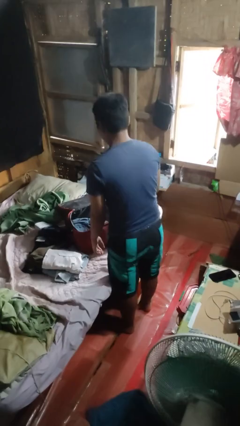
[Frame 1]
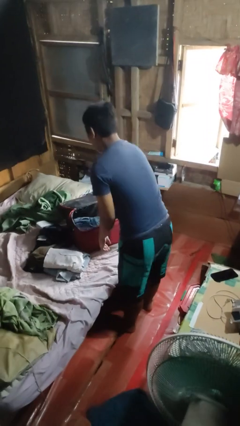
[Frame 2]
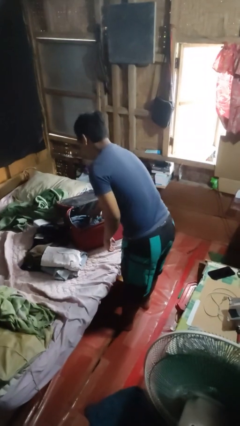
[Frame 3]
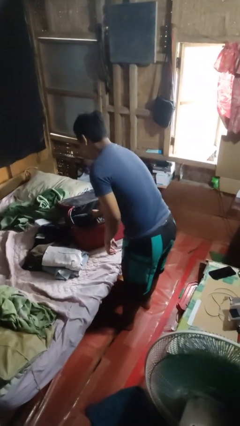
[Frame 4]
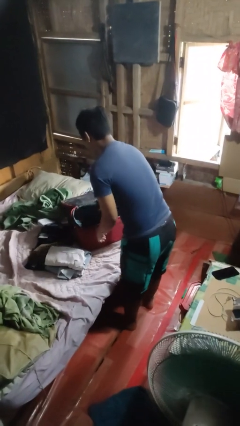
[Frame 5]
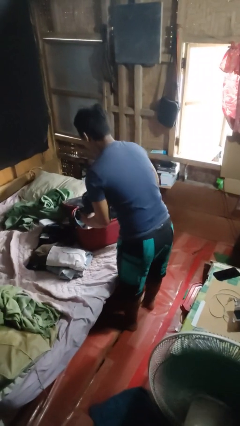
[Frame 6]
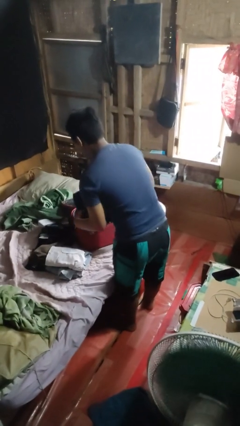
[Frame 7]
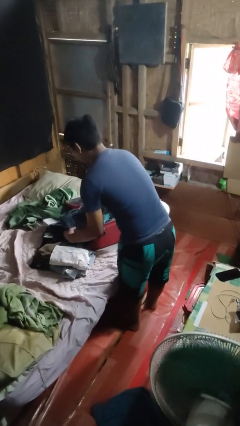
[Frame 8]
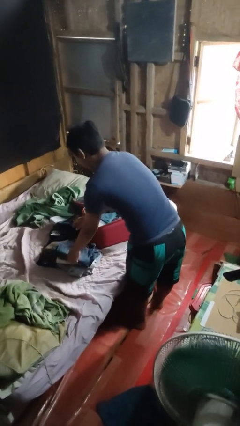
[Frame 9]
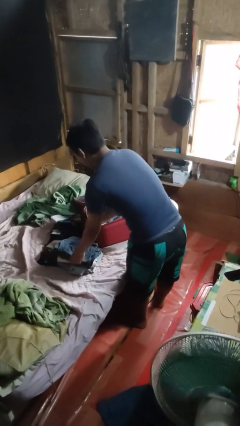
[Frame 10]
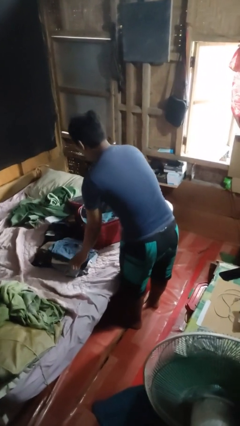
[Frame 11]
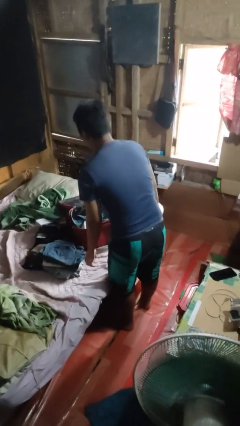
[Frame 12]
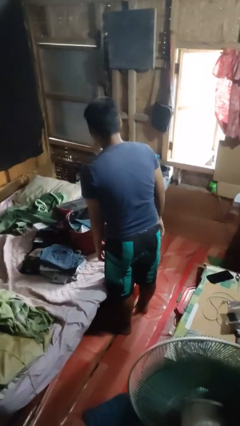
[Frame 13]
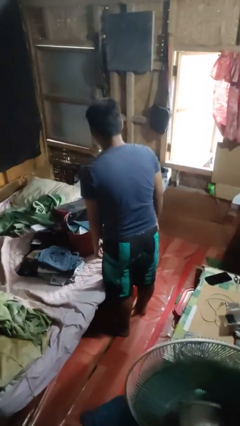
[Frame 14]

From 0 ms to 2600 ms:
person unloads clothes from suitcase

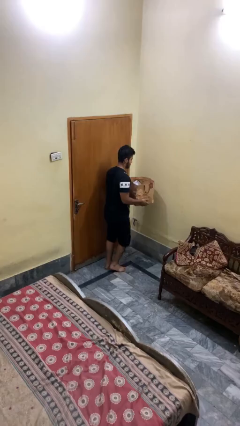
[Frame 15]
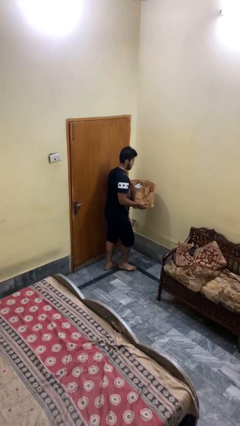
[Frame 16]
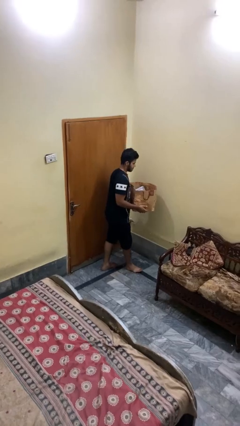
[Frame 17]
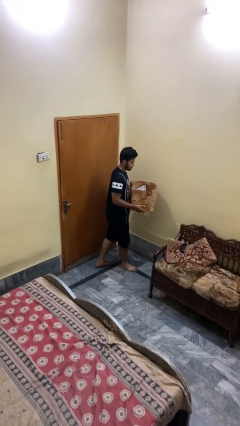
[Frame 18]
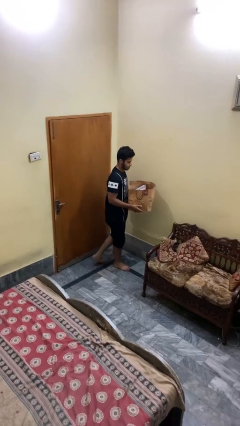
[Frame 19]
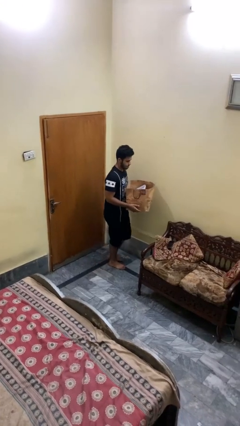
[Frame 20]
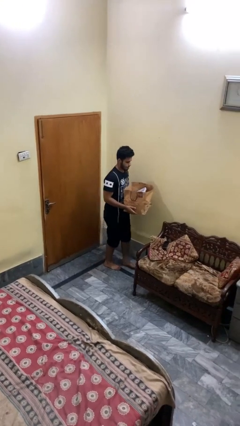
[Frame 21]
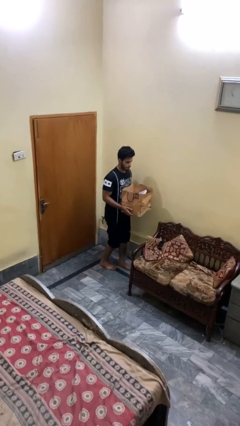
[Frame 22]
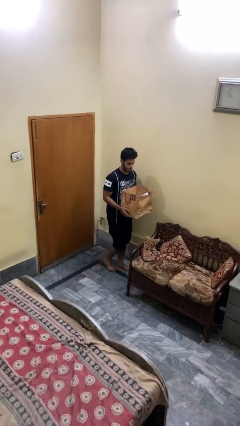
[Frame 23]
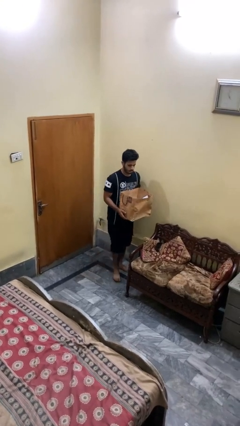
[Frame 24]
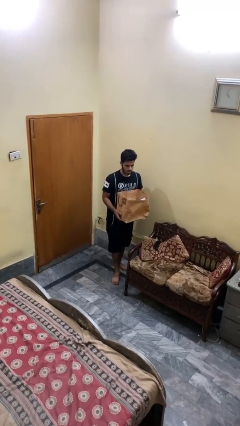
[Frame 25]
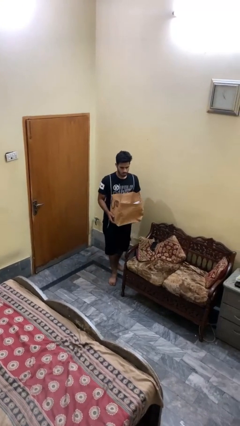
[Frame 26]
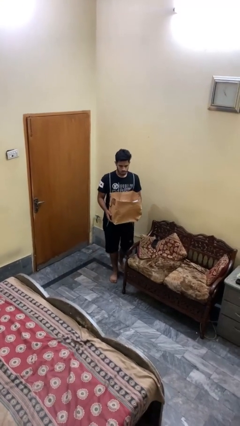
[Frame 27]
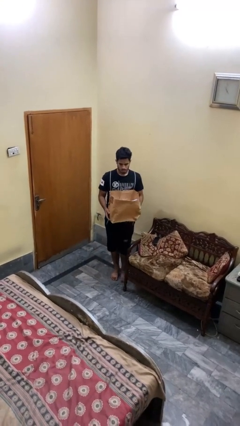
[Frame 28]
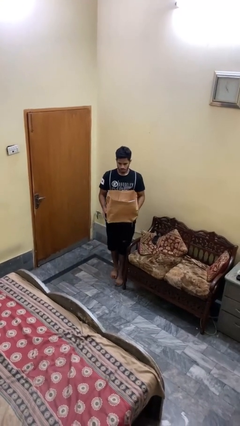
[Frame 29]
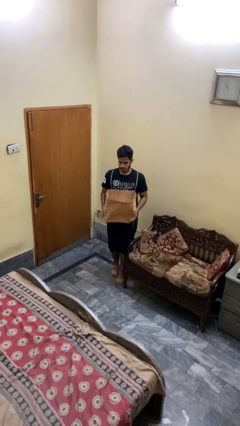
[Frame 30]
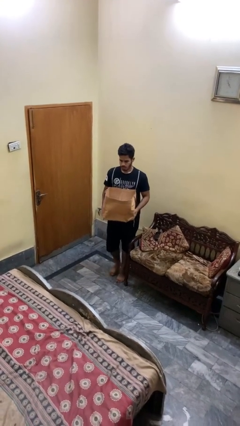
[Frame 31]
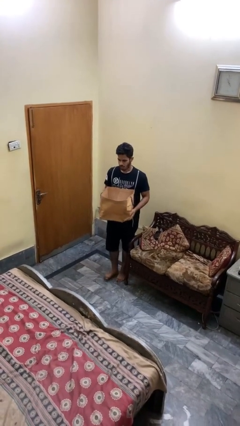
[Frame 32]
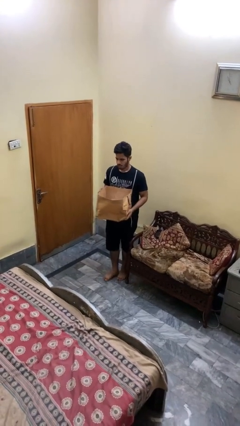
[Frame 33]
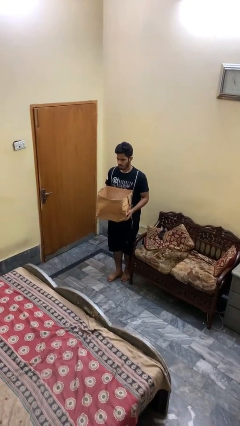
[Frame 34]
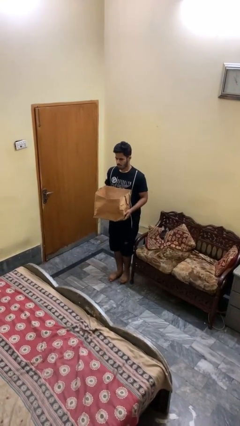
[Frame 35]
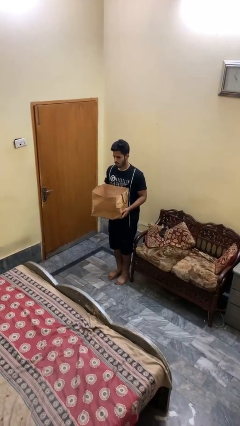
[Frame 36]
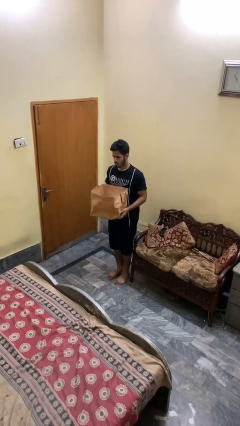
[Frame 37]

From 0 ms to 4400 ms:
person carries groceries

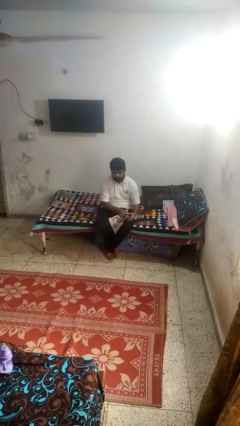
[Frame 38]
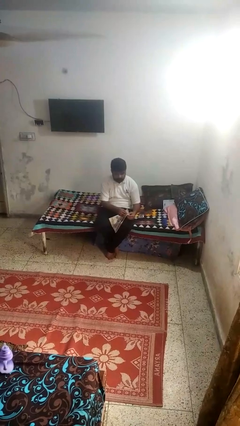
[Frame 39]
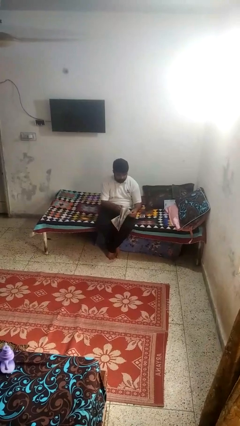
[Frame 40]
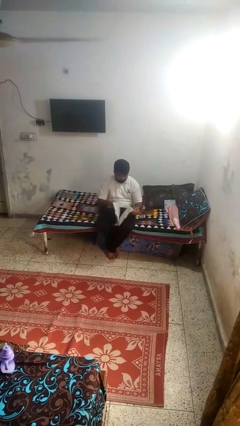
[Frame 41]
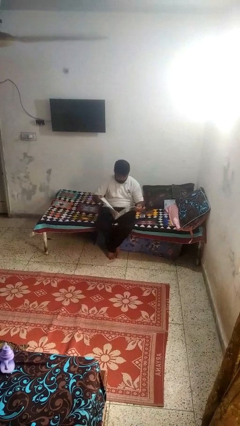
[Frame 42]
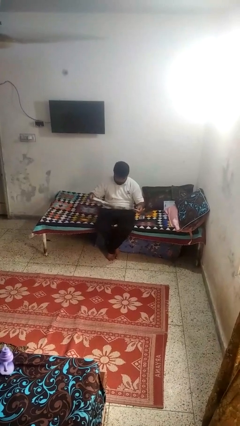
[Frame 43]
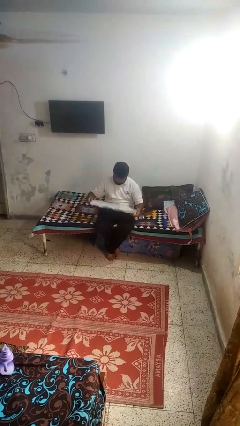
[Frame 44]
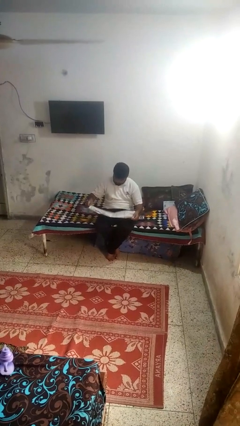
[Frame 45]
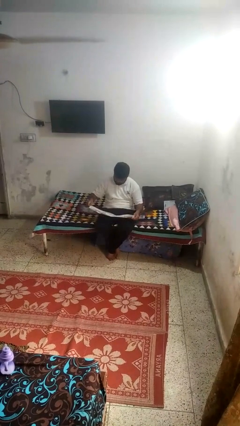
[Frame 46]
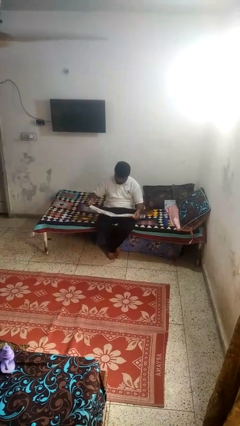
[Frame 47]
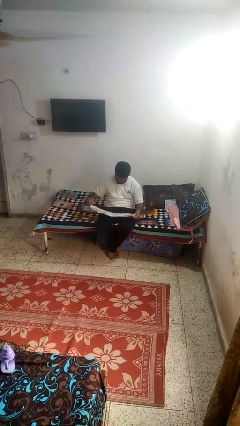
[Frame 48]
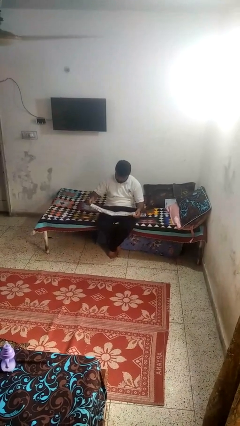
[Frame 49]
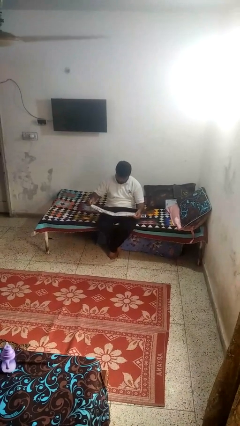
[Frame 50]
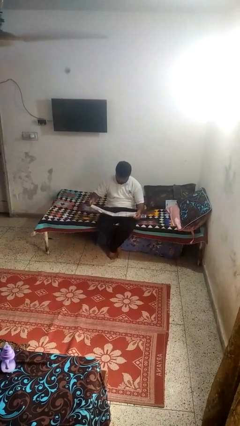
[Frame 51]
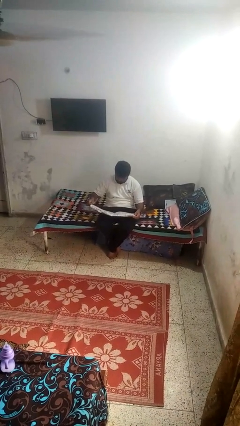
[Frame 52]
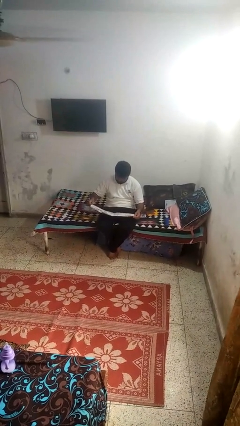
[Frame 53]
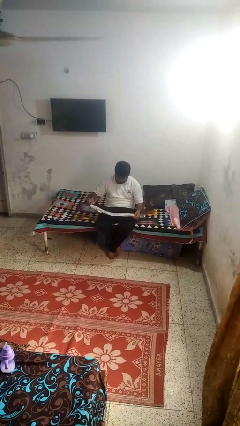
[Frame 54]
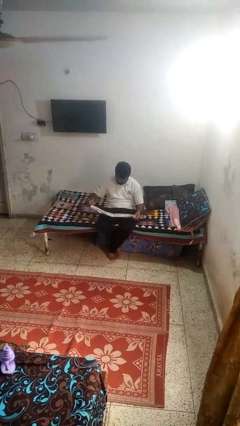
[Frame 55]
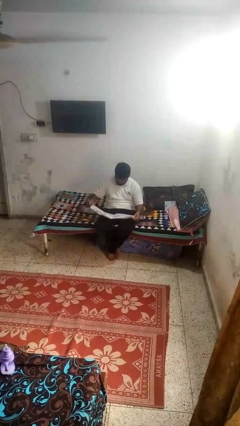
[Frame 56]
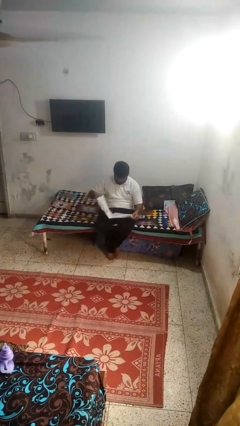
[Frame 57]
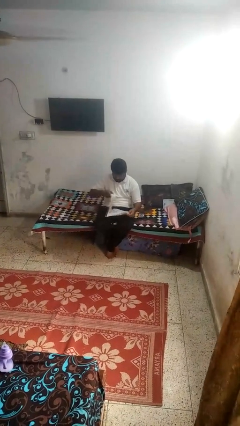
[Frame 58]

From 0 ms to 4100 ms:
person reads magazine

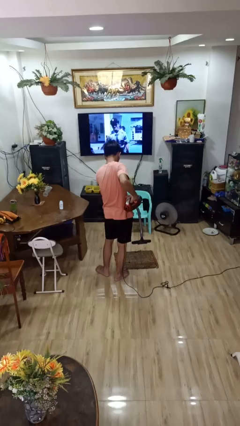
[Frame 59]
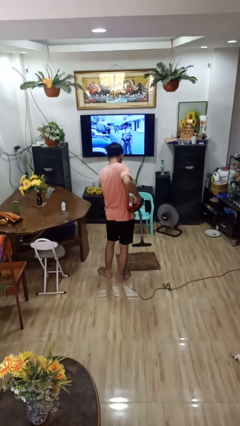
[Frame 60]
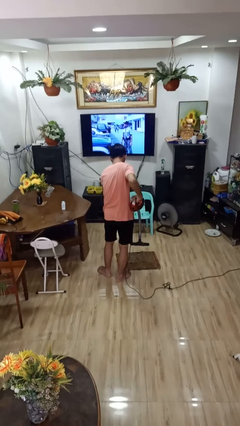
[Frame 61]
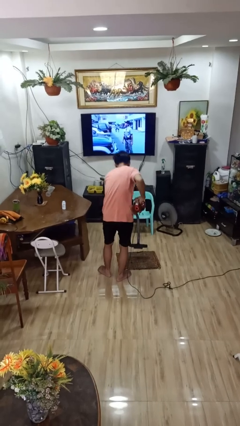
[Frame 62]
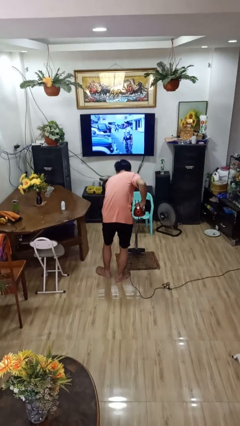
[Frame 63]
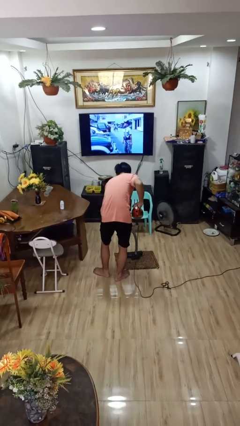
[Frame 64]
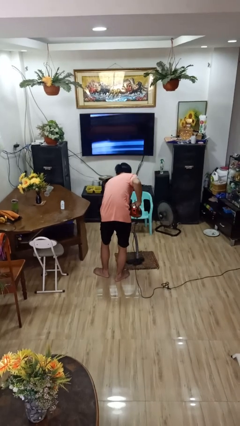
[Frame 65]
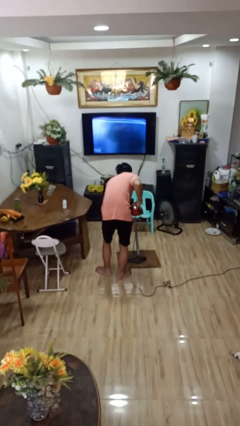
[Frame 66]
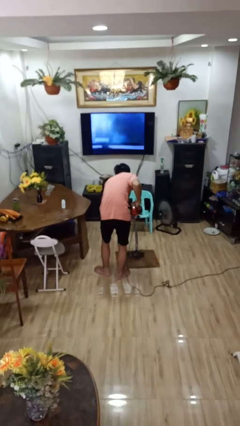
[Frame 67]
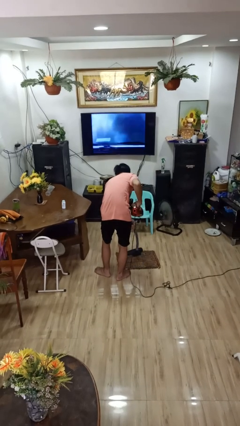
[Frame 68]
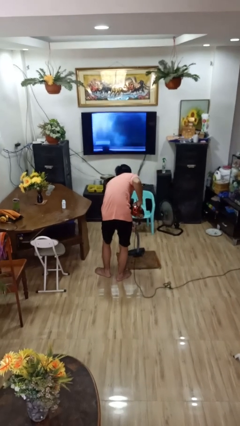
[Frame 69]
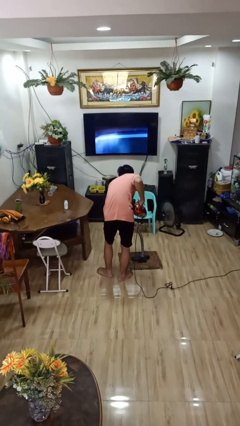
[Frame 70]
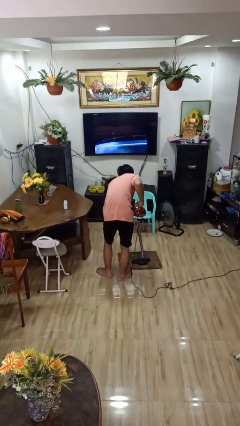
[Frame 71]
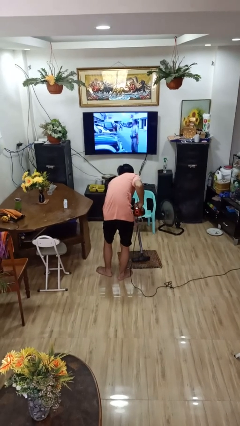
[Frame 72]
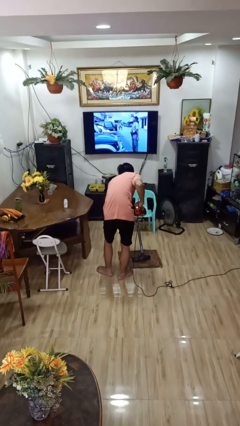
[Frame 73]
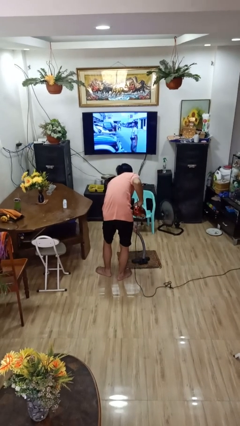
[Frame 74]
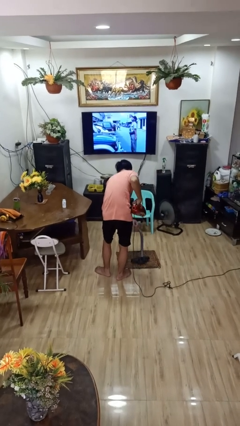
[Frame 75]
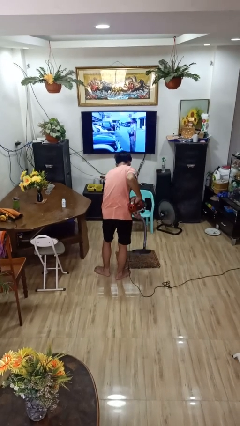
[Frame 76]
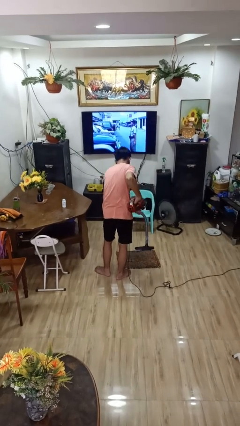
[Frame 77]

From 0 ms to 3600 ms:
person vacuums carpet

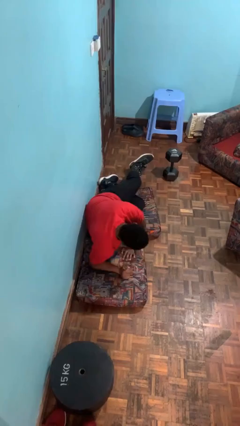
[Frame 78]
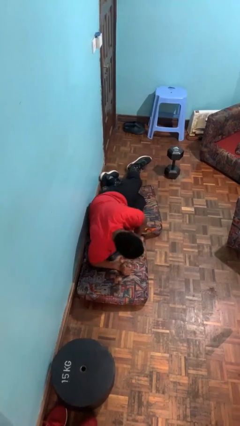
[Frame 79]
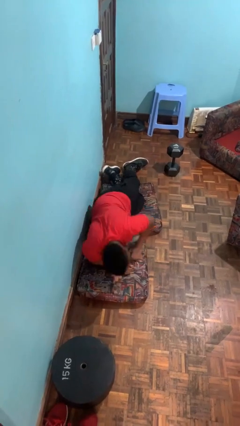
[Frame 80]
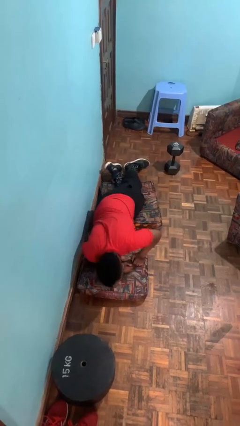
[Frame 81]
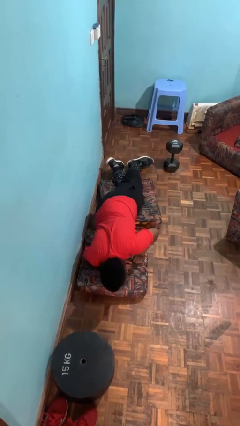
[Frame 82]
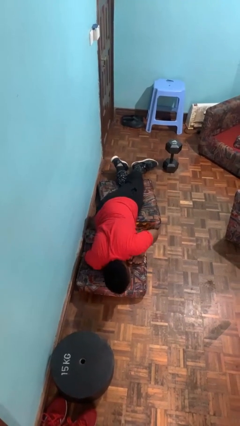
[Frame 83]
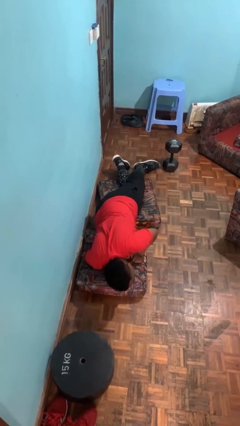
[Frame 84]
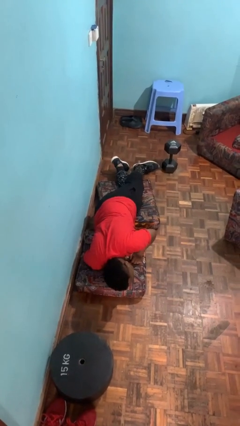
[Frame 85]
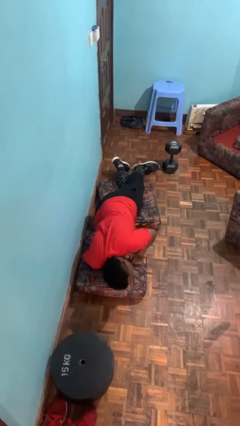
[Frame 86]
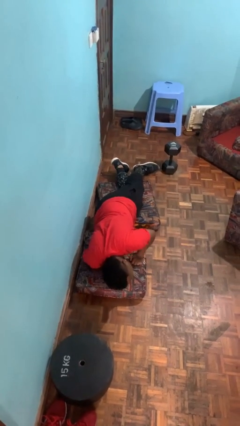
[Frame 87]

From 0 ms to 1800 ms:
person lies down on floor

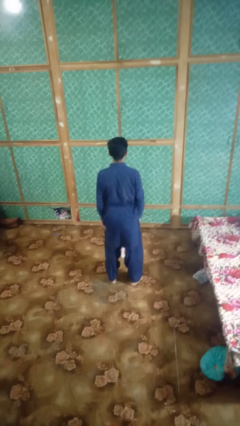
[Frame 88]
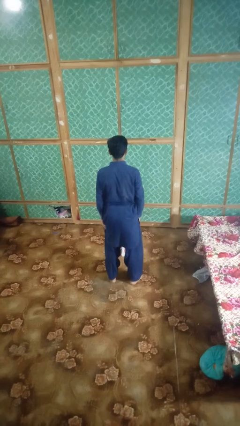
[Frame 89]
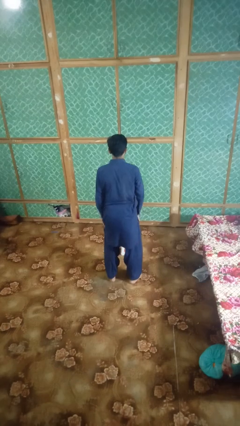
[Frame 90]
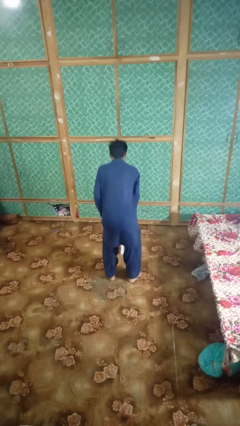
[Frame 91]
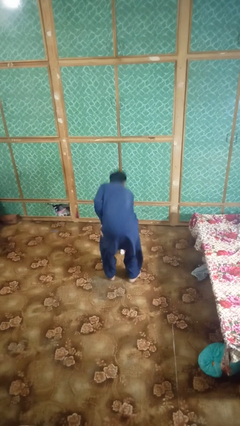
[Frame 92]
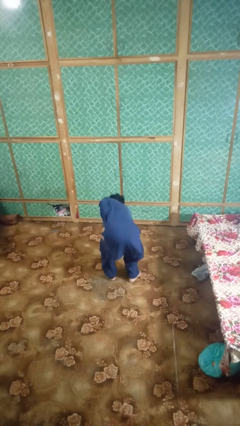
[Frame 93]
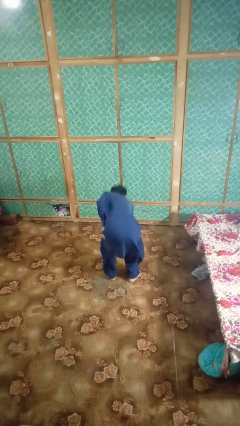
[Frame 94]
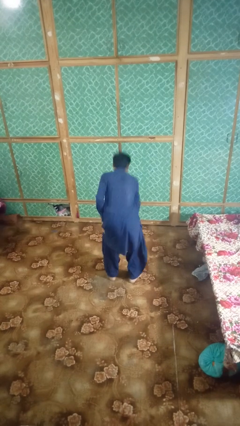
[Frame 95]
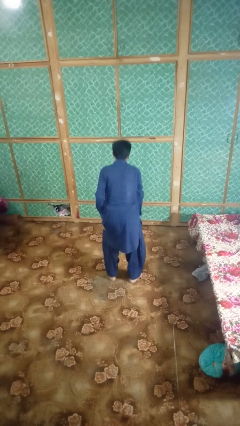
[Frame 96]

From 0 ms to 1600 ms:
person picks up object from floor
